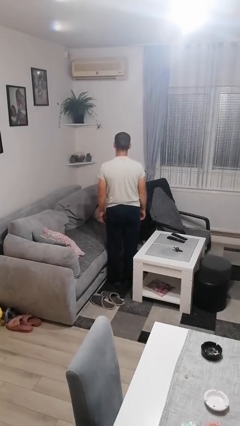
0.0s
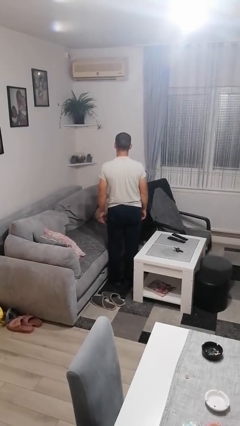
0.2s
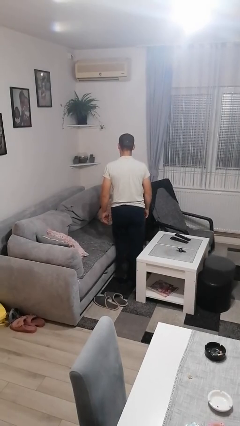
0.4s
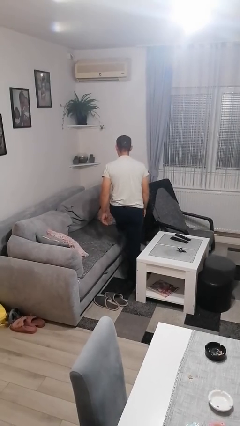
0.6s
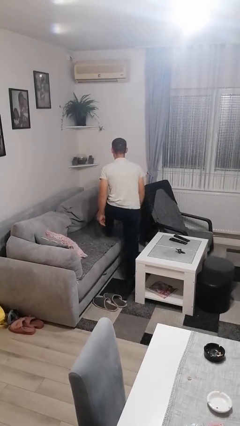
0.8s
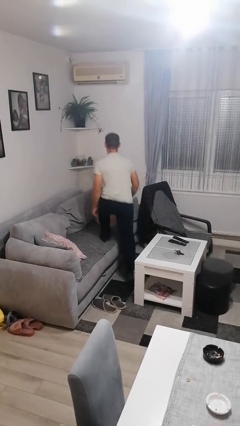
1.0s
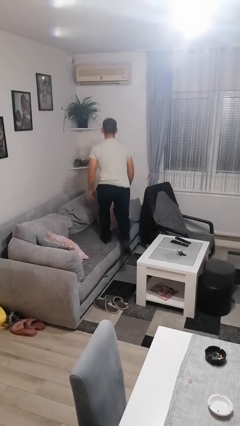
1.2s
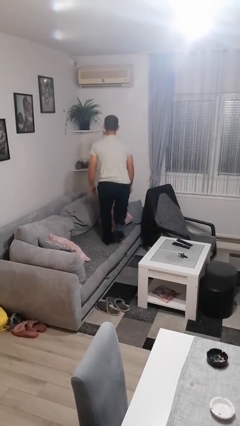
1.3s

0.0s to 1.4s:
person climbs on couch

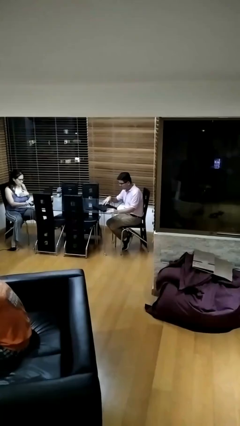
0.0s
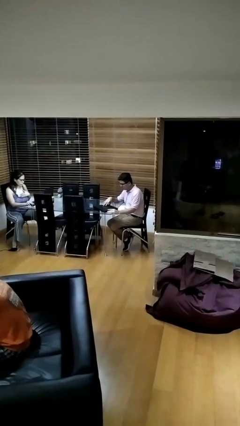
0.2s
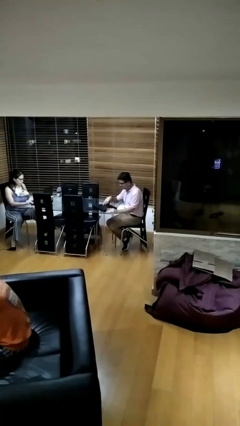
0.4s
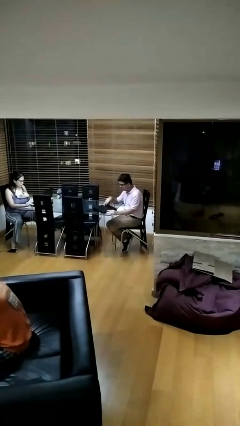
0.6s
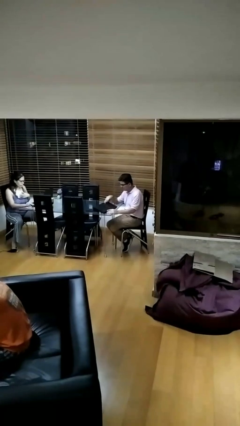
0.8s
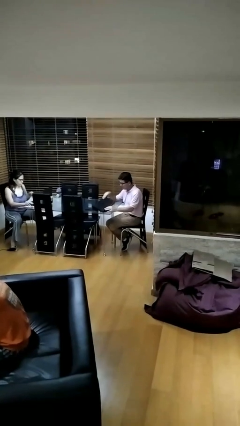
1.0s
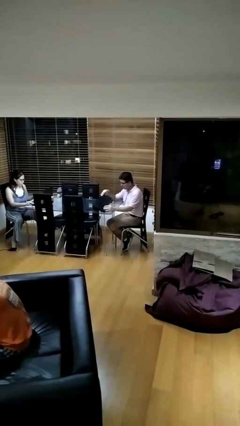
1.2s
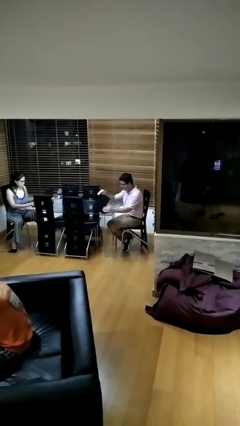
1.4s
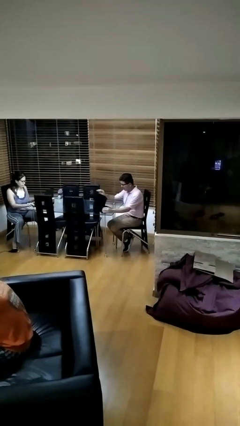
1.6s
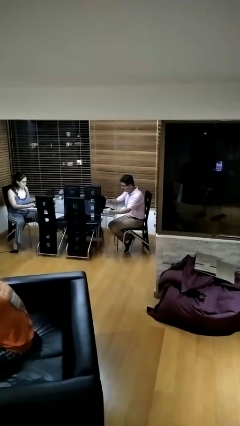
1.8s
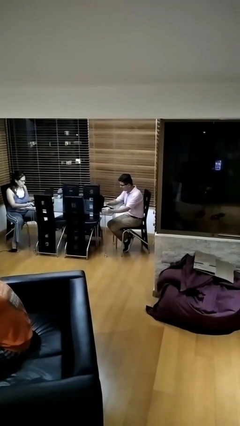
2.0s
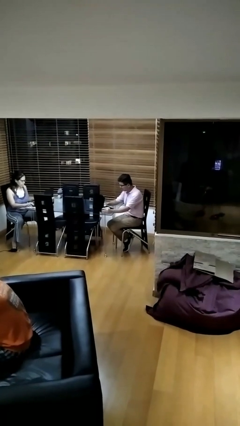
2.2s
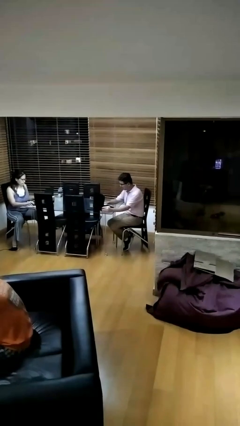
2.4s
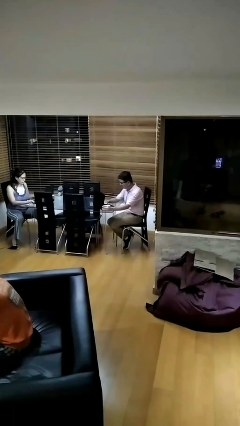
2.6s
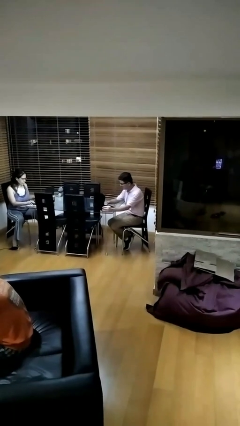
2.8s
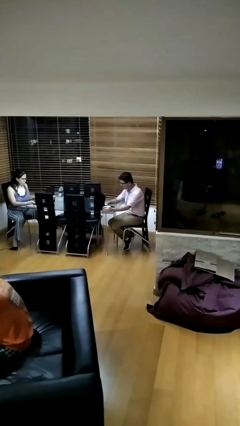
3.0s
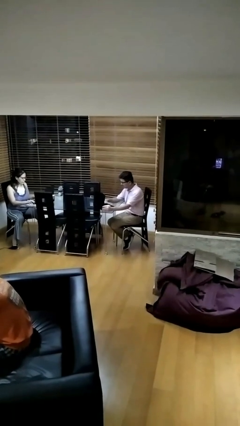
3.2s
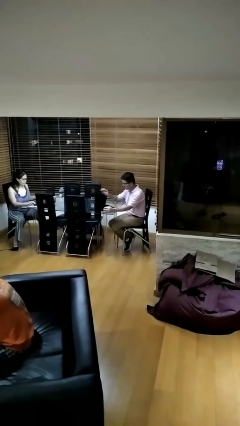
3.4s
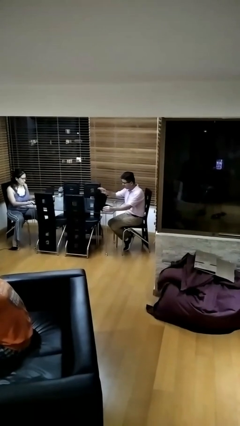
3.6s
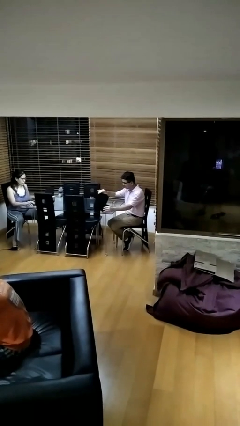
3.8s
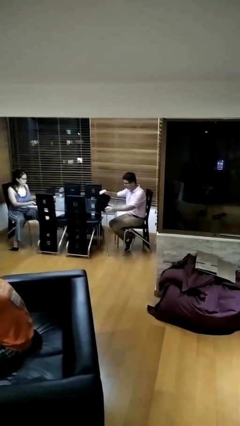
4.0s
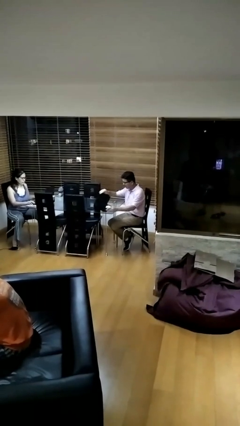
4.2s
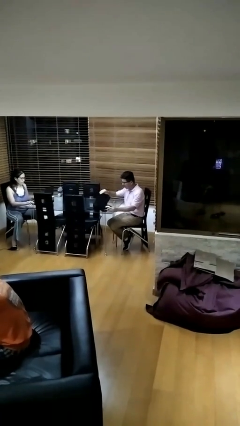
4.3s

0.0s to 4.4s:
person interacts with laptop

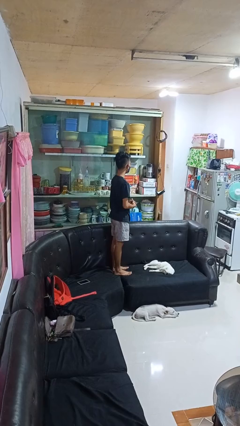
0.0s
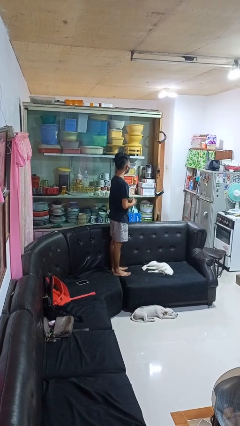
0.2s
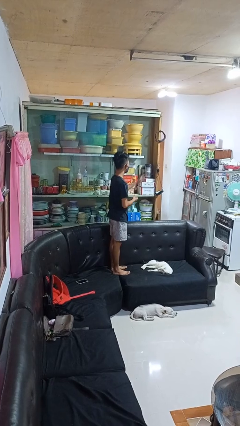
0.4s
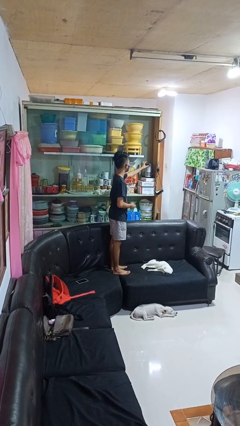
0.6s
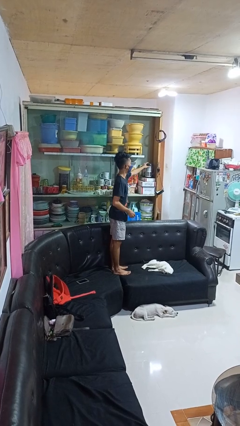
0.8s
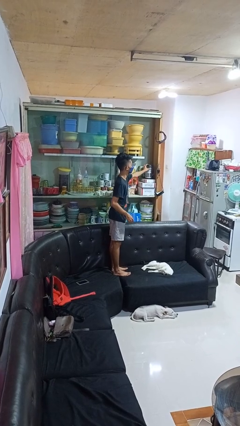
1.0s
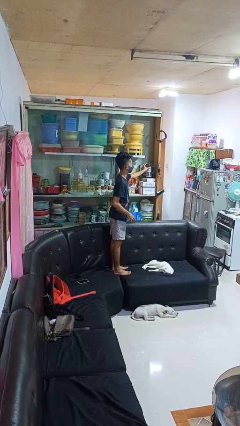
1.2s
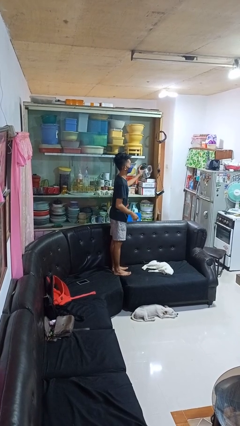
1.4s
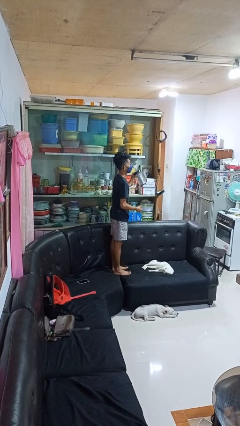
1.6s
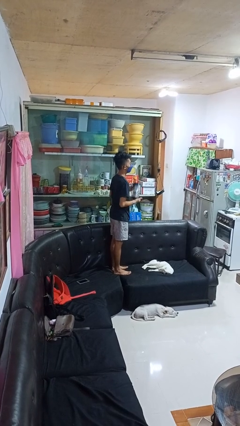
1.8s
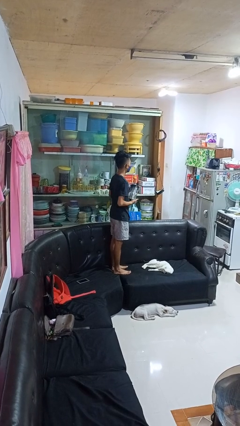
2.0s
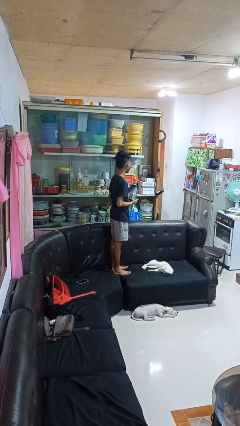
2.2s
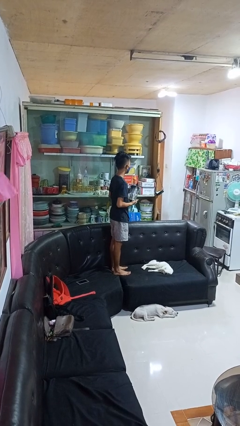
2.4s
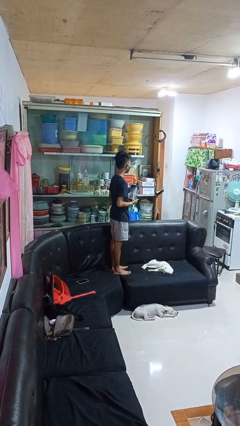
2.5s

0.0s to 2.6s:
person picks up object from cabinet

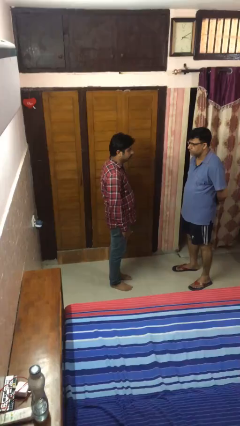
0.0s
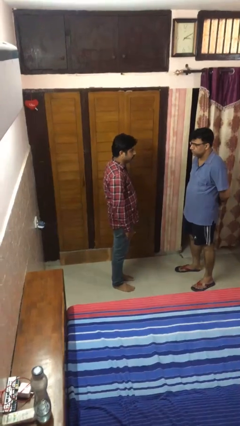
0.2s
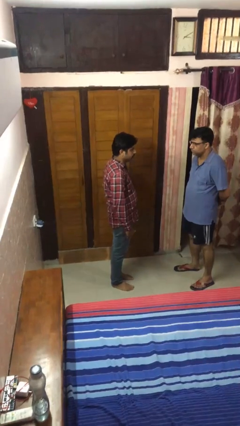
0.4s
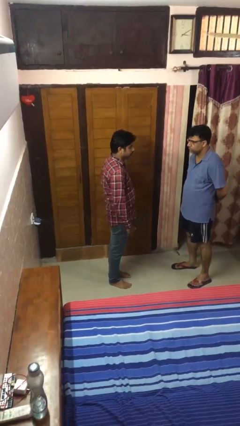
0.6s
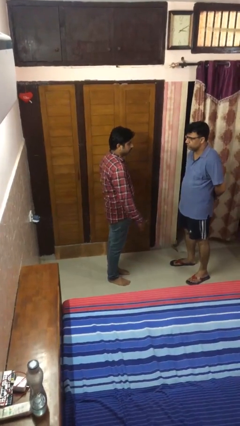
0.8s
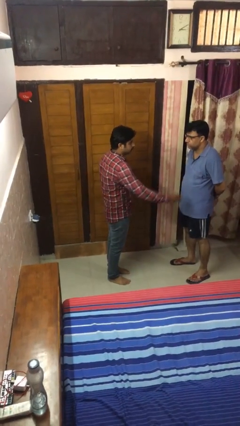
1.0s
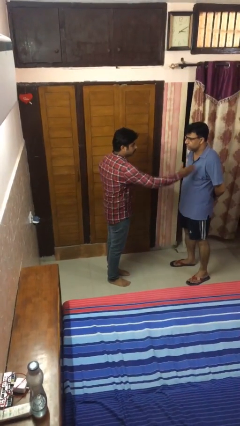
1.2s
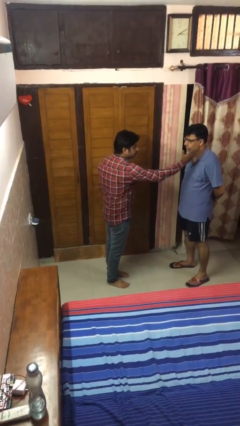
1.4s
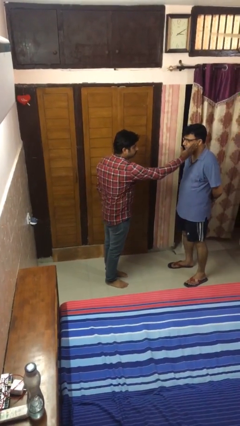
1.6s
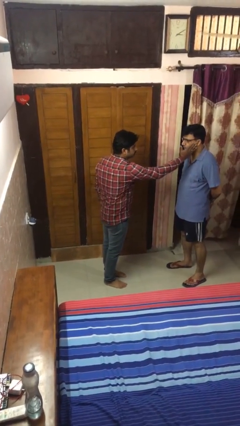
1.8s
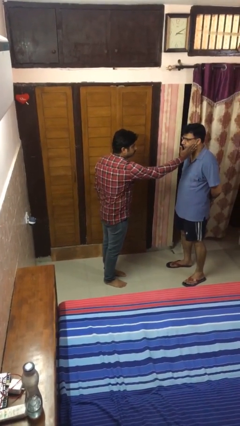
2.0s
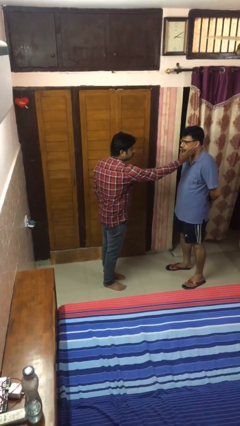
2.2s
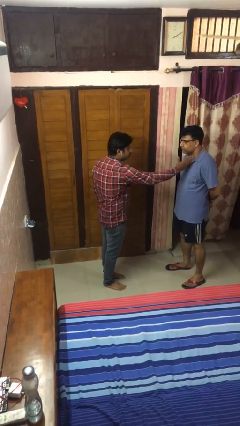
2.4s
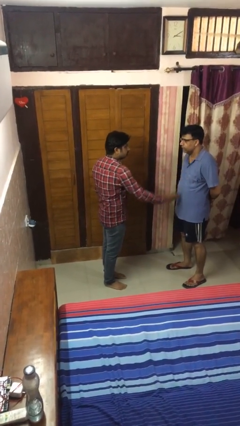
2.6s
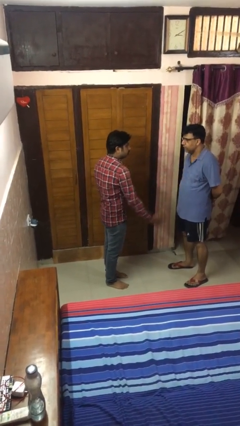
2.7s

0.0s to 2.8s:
person touches face of person

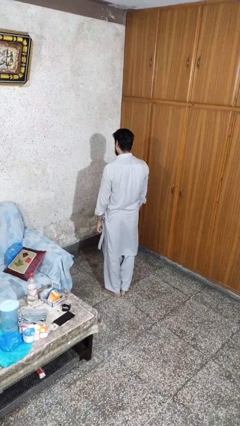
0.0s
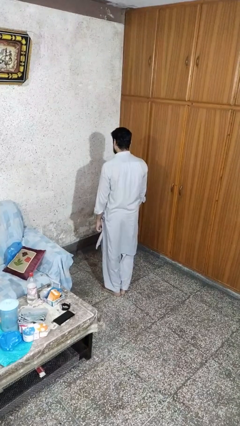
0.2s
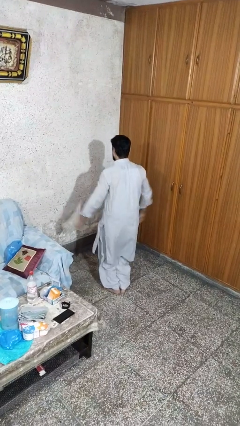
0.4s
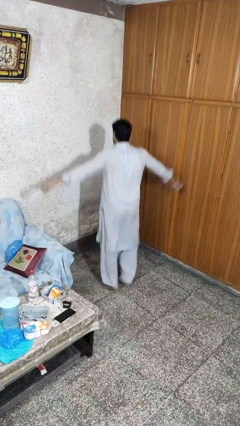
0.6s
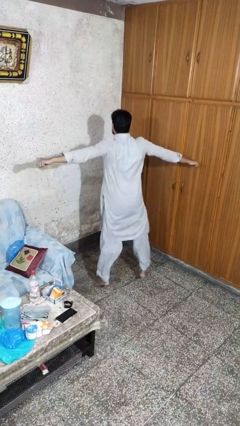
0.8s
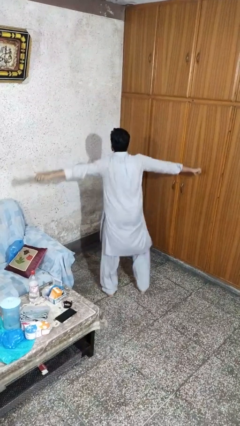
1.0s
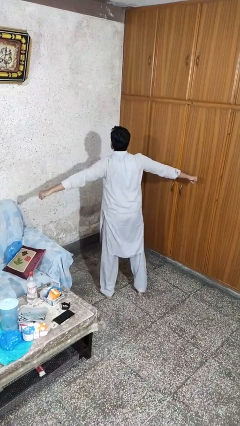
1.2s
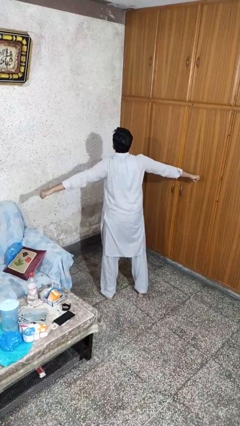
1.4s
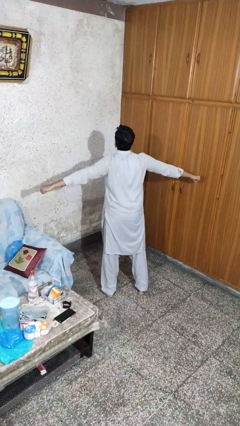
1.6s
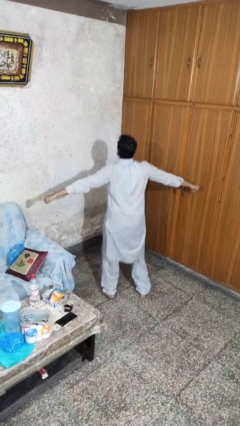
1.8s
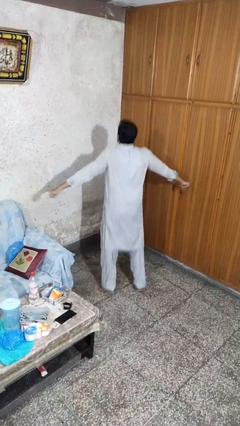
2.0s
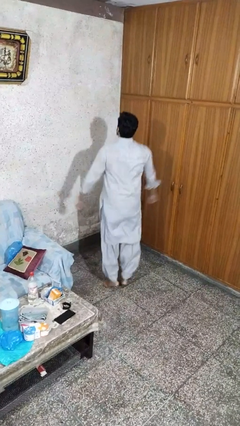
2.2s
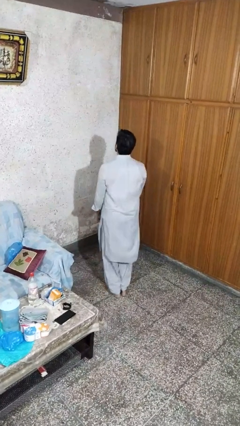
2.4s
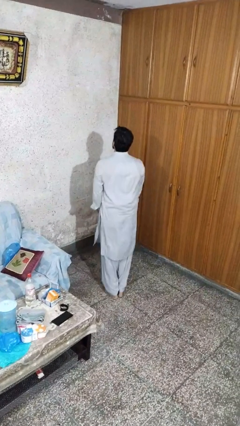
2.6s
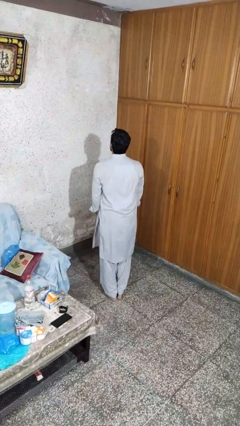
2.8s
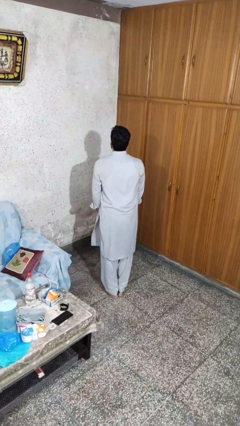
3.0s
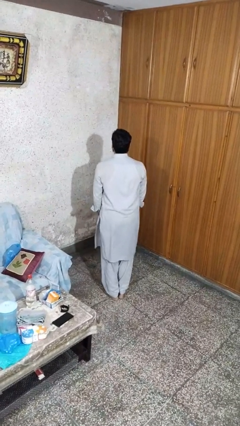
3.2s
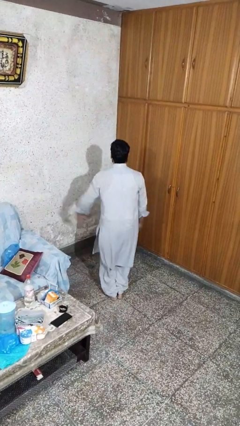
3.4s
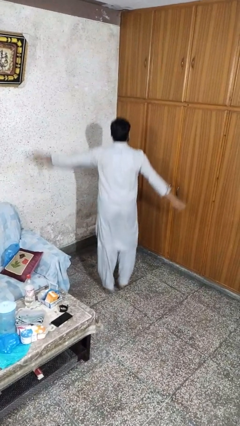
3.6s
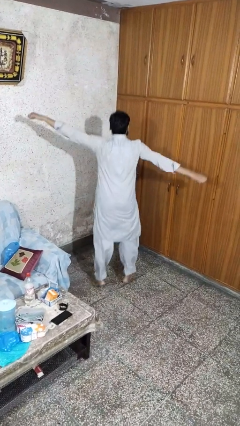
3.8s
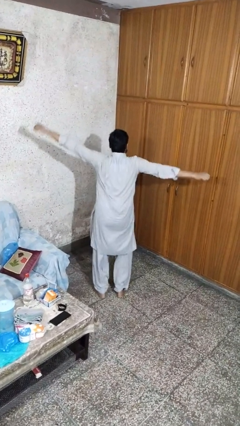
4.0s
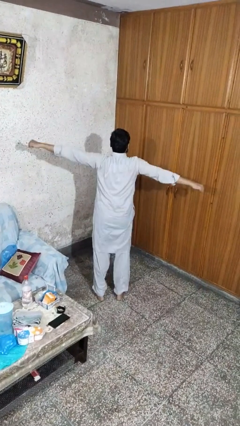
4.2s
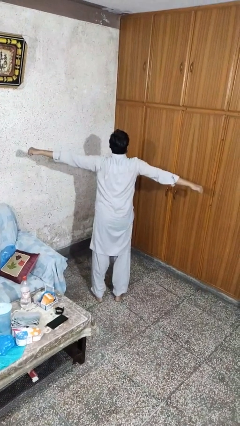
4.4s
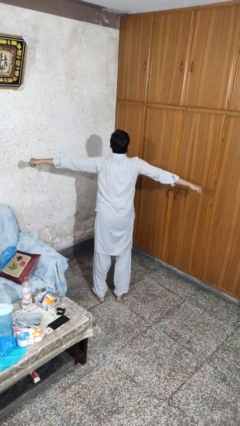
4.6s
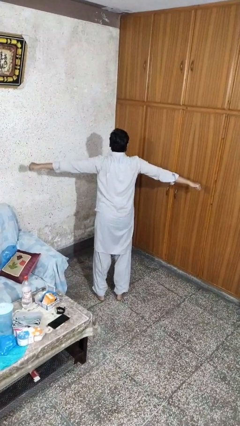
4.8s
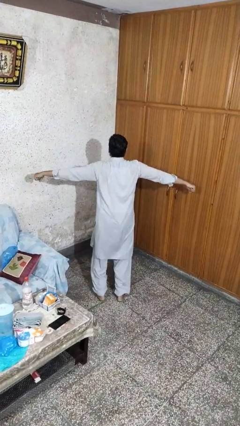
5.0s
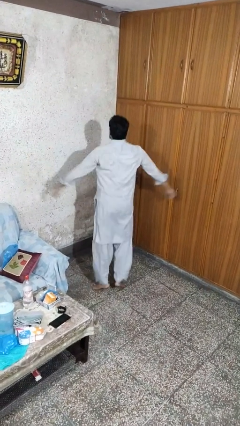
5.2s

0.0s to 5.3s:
person exercises with jumping jacks

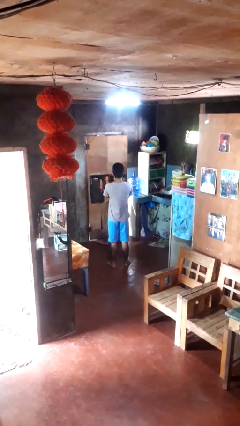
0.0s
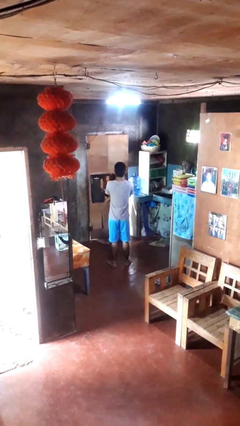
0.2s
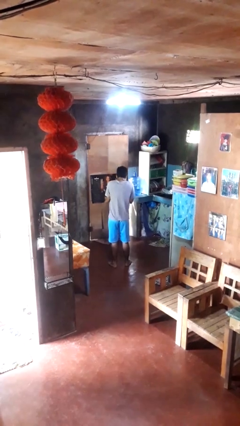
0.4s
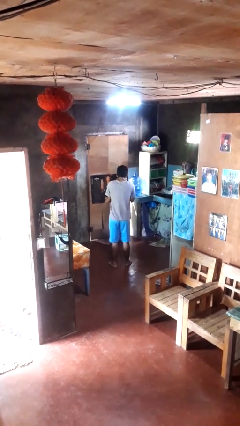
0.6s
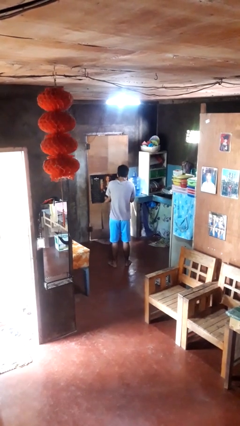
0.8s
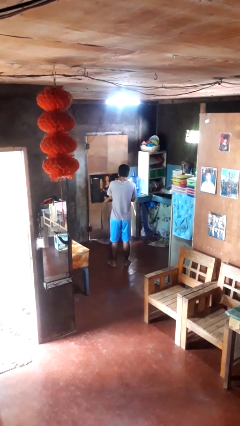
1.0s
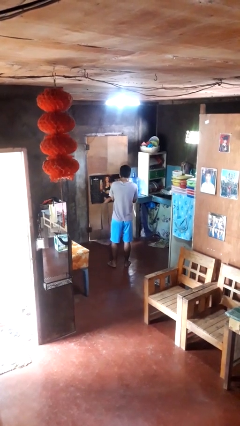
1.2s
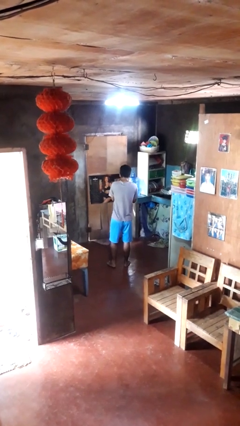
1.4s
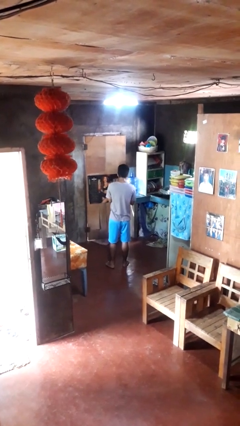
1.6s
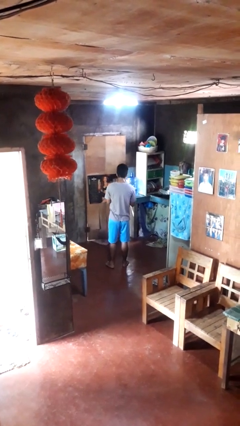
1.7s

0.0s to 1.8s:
person sneezes into hand
